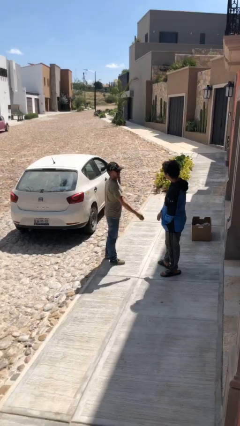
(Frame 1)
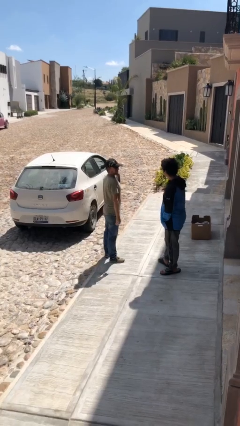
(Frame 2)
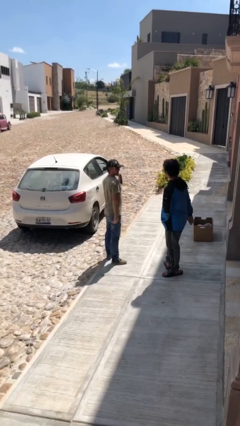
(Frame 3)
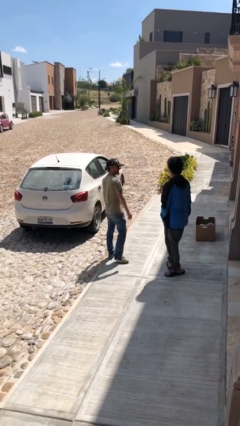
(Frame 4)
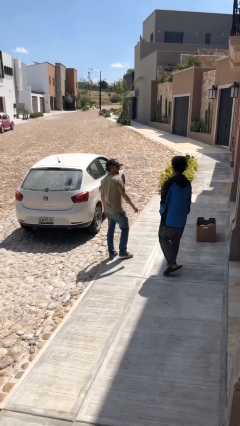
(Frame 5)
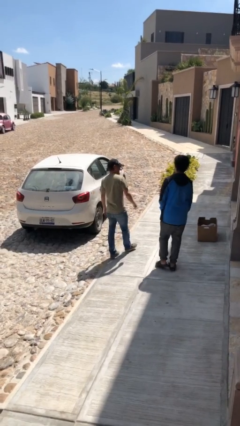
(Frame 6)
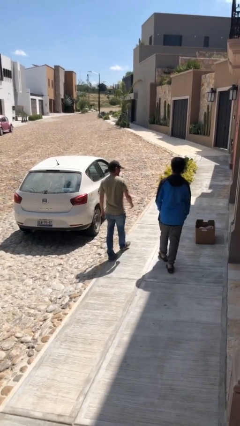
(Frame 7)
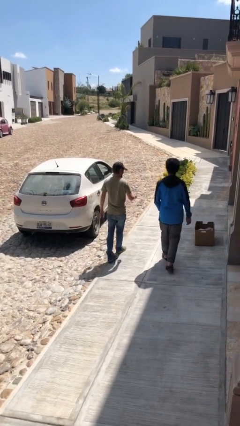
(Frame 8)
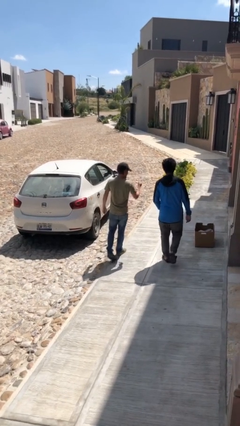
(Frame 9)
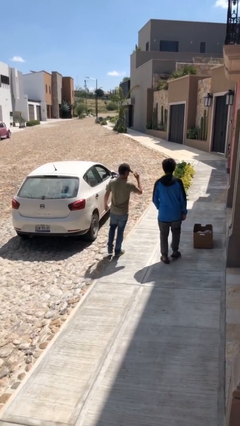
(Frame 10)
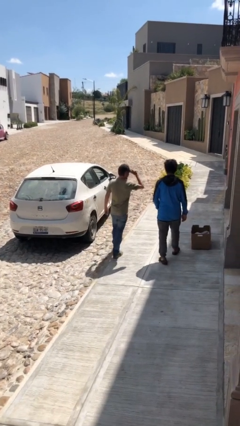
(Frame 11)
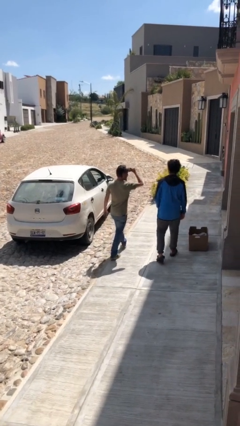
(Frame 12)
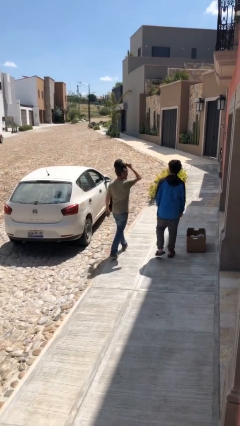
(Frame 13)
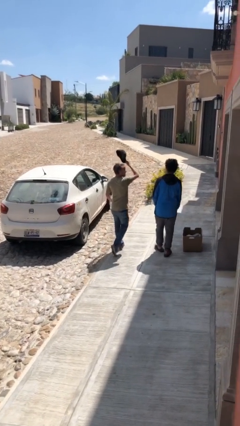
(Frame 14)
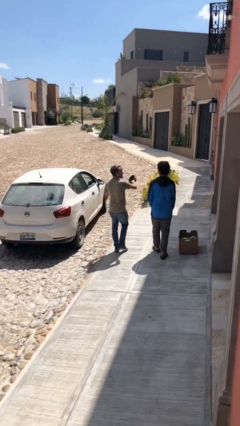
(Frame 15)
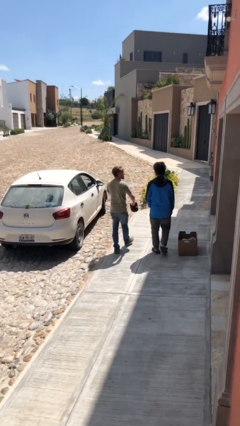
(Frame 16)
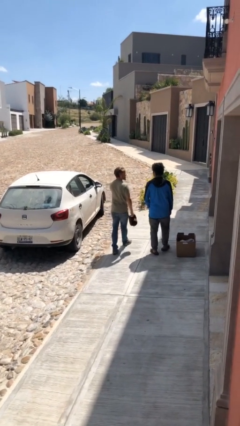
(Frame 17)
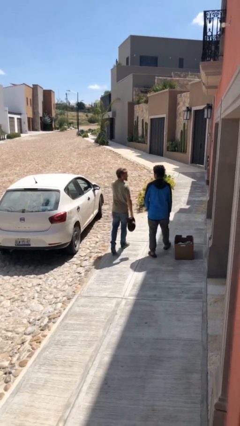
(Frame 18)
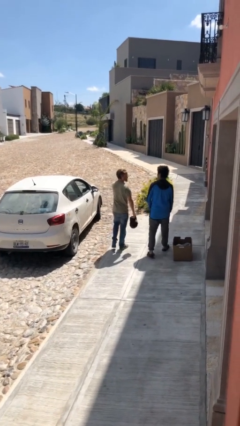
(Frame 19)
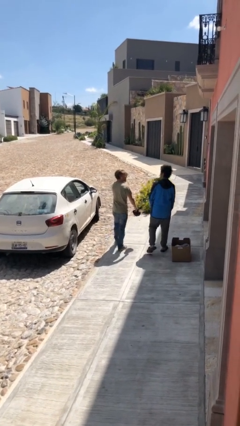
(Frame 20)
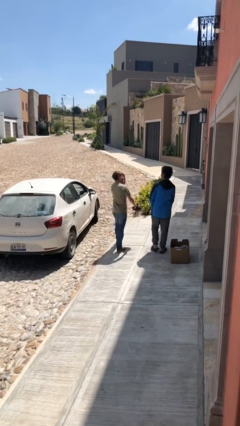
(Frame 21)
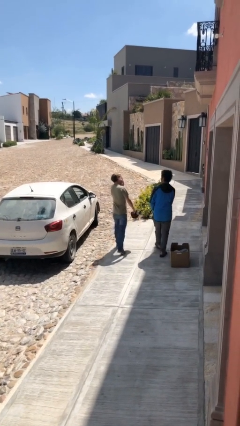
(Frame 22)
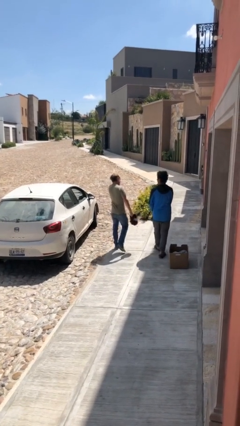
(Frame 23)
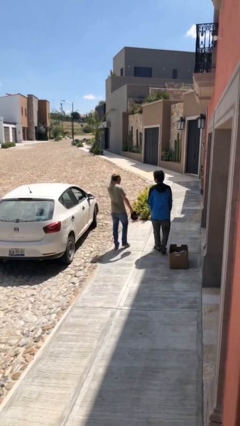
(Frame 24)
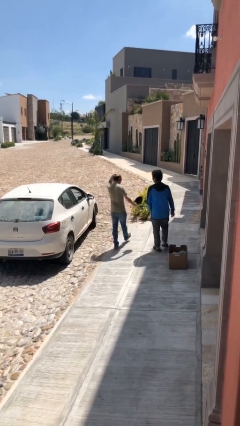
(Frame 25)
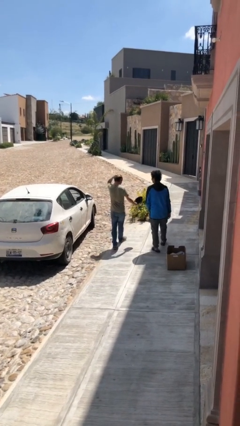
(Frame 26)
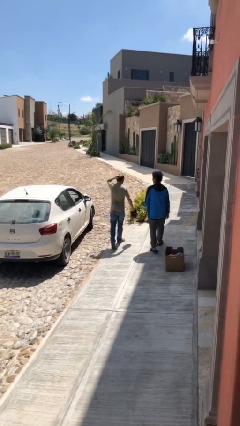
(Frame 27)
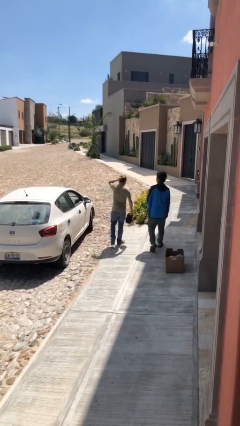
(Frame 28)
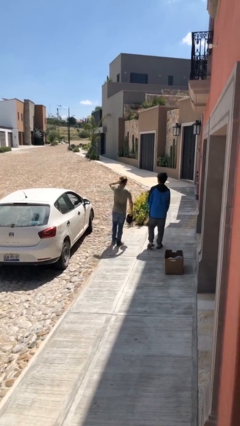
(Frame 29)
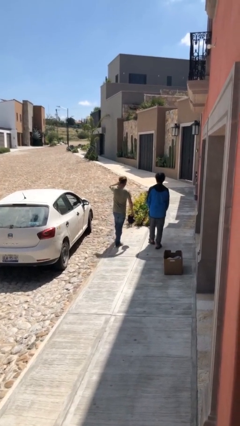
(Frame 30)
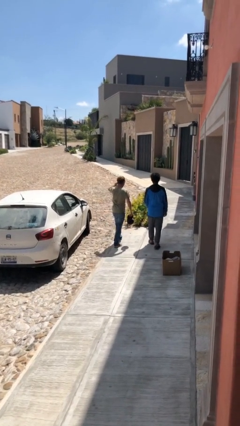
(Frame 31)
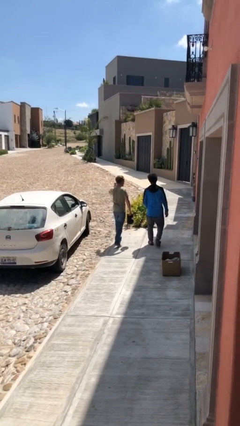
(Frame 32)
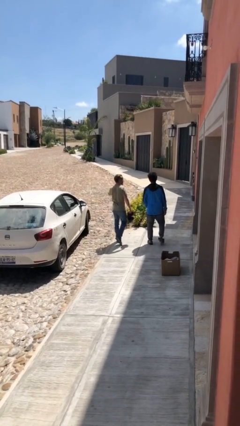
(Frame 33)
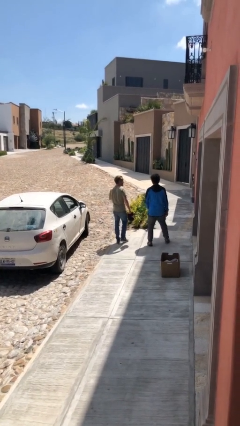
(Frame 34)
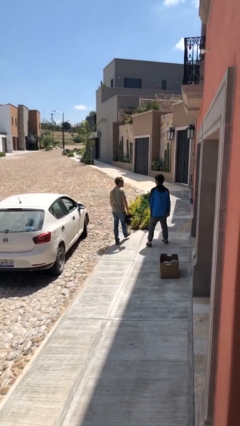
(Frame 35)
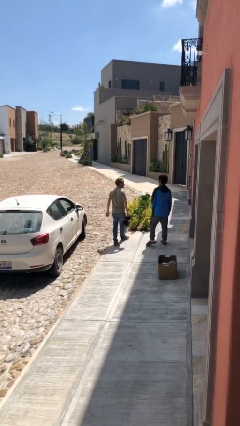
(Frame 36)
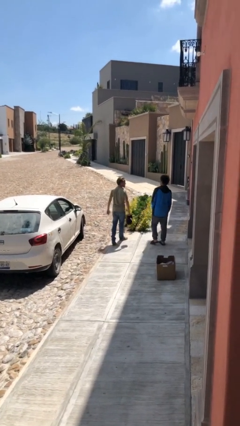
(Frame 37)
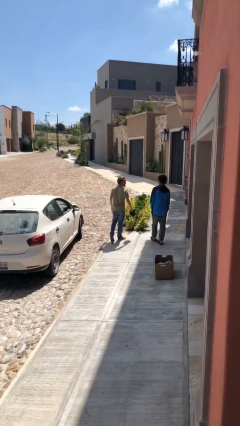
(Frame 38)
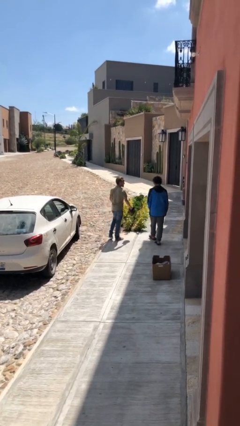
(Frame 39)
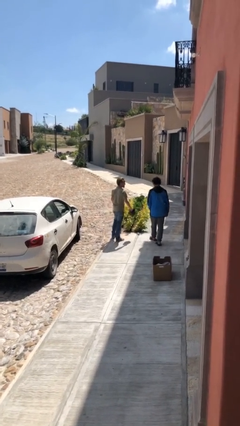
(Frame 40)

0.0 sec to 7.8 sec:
person talks to person

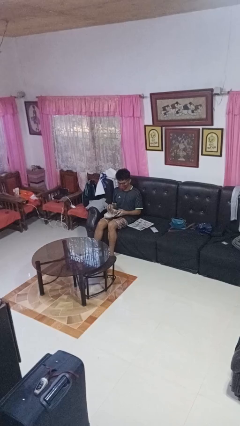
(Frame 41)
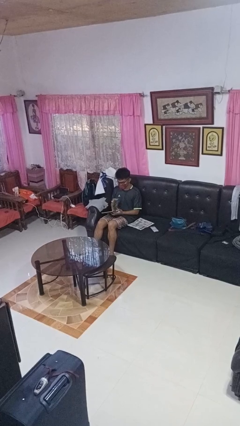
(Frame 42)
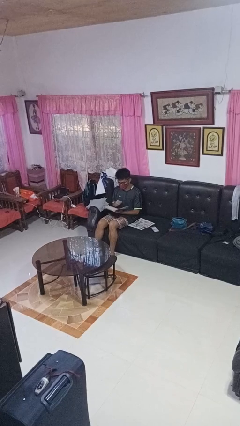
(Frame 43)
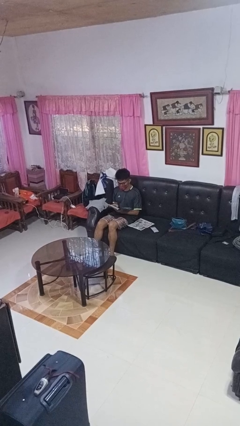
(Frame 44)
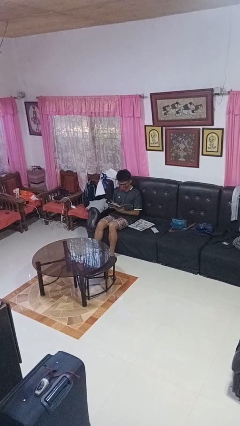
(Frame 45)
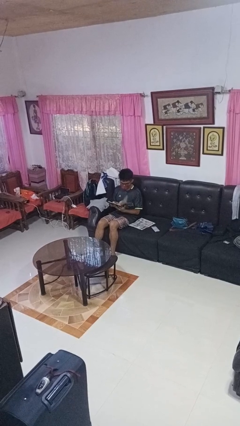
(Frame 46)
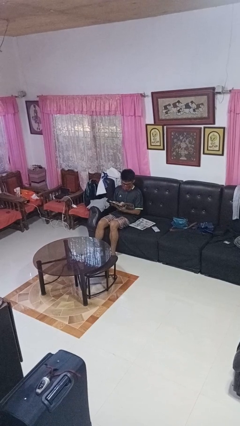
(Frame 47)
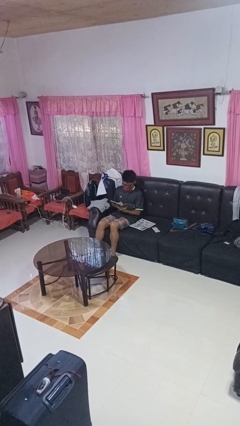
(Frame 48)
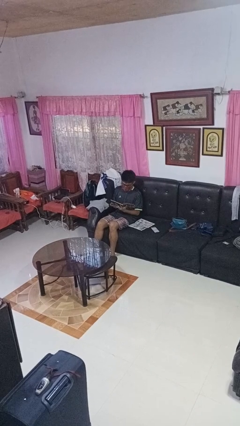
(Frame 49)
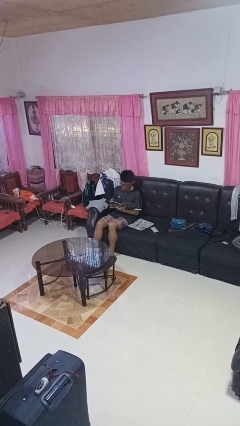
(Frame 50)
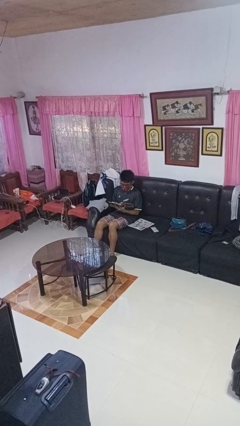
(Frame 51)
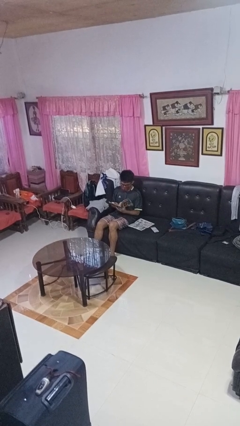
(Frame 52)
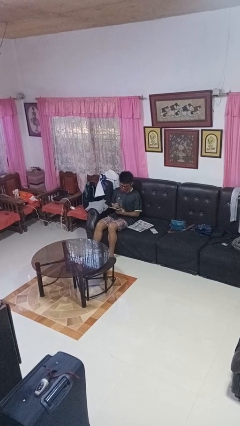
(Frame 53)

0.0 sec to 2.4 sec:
person reads magazine

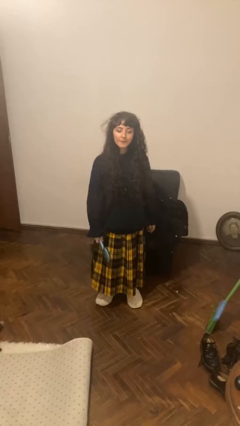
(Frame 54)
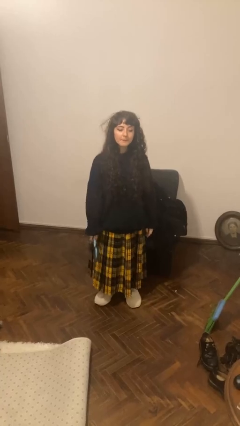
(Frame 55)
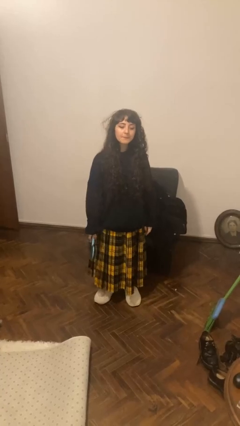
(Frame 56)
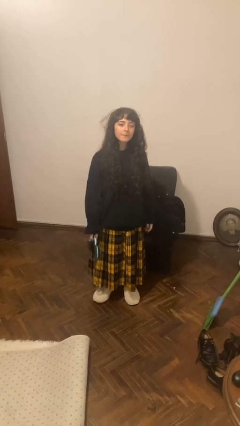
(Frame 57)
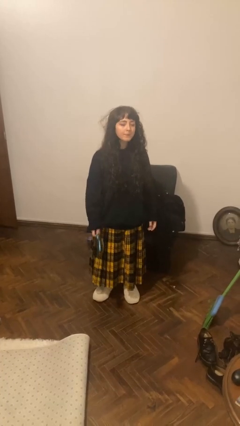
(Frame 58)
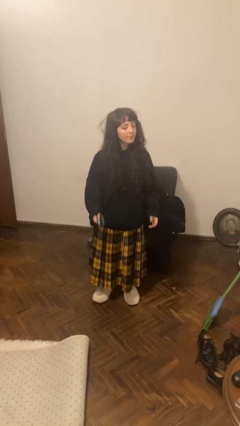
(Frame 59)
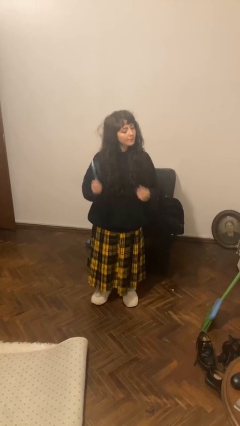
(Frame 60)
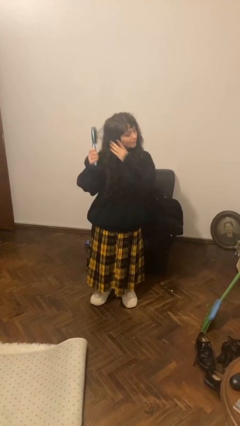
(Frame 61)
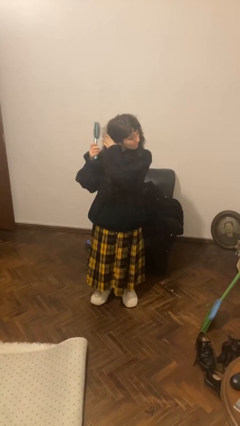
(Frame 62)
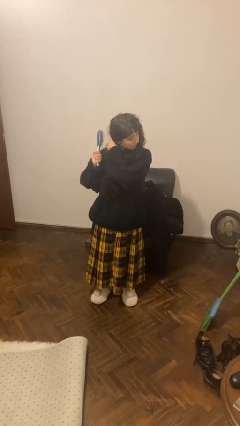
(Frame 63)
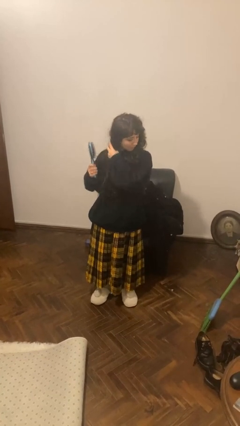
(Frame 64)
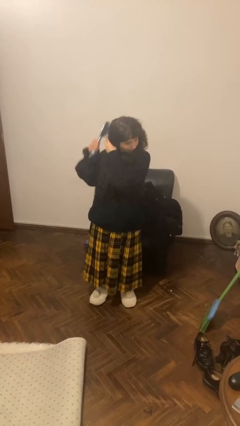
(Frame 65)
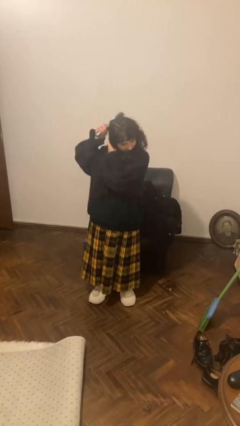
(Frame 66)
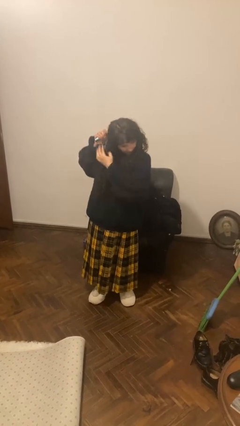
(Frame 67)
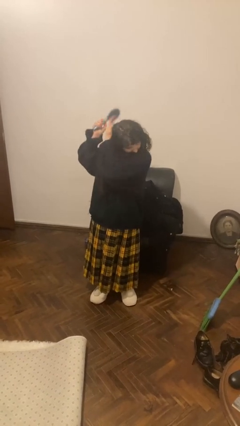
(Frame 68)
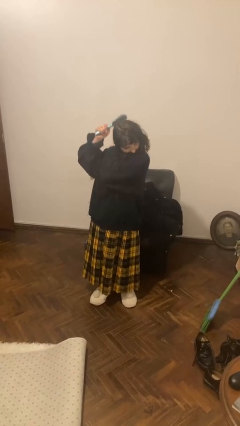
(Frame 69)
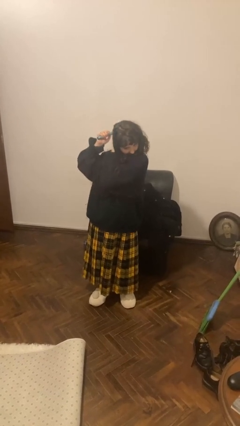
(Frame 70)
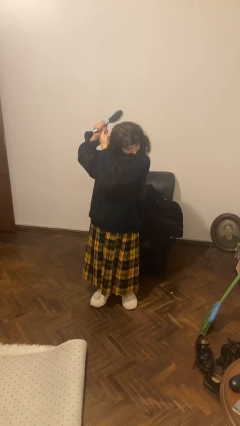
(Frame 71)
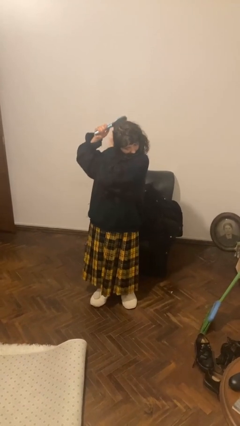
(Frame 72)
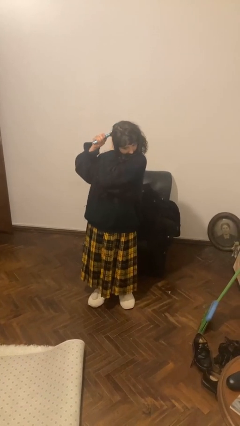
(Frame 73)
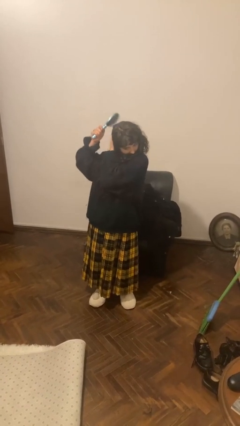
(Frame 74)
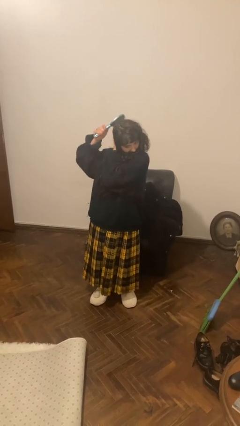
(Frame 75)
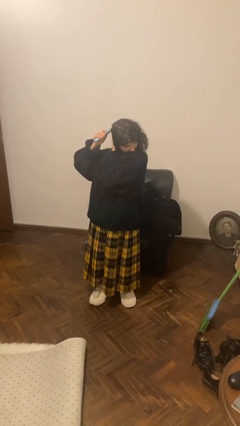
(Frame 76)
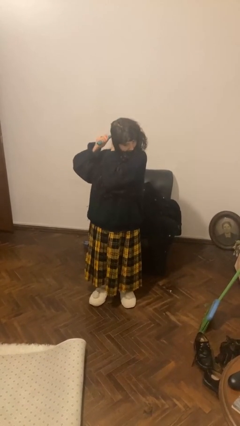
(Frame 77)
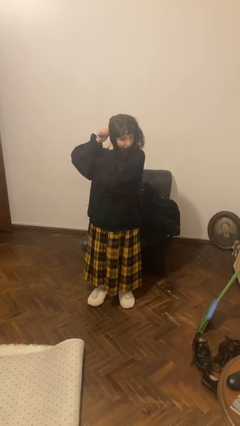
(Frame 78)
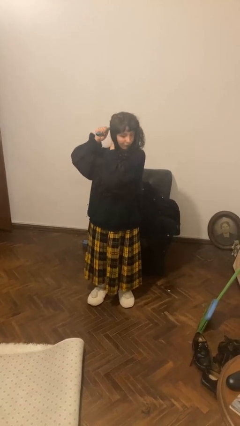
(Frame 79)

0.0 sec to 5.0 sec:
person brushes hair

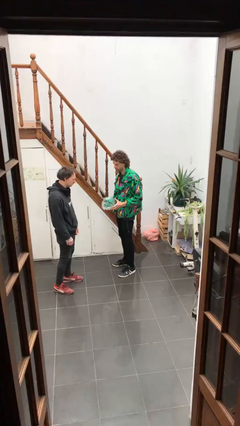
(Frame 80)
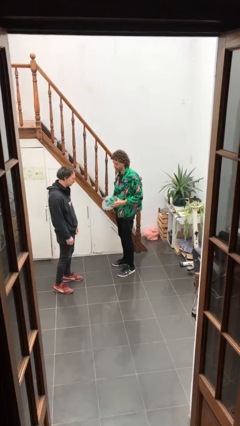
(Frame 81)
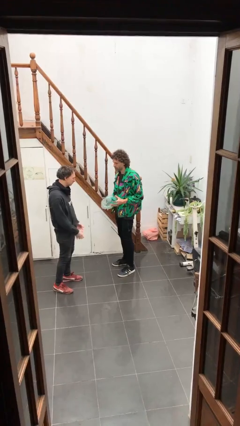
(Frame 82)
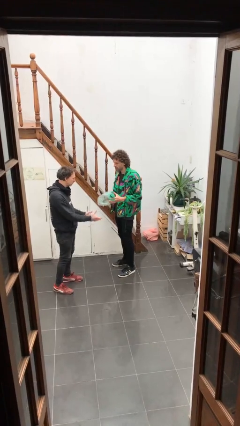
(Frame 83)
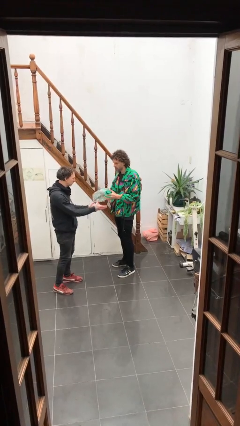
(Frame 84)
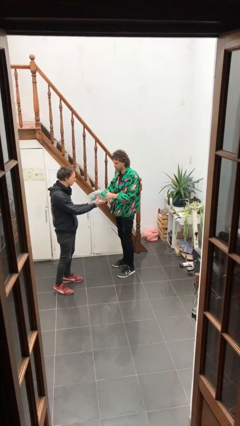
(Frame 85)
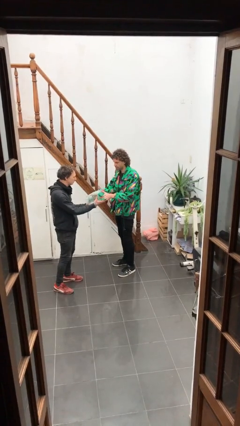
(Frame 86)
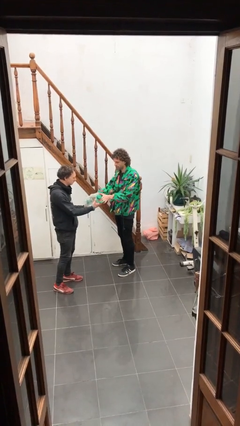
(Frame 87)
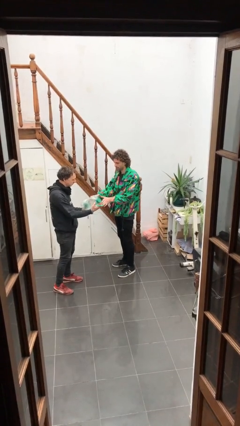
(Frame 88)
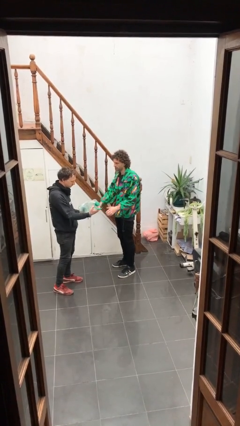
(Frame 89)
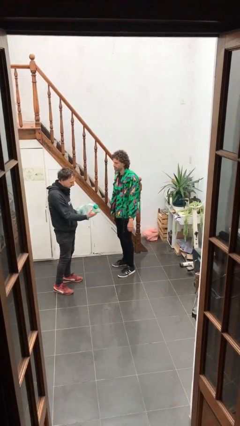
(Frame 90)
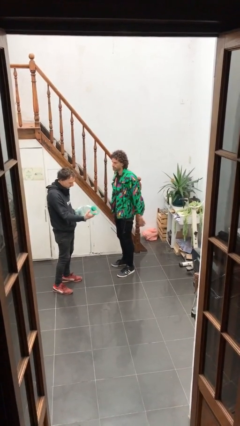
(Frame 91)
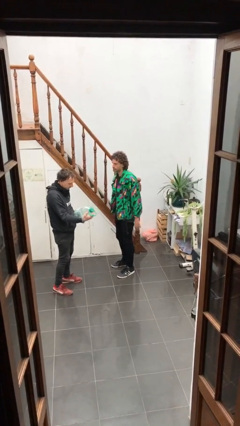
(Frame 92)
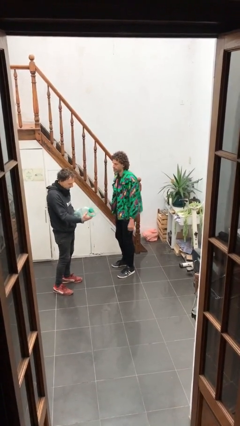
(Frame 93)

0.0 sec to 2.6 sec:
person transfers object to person
